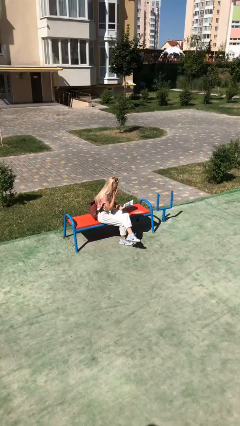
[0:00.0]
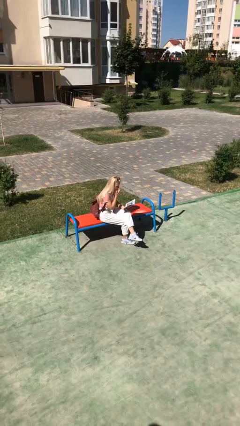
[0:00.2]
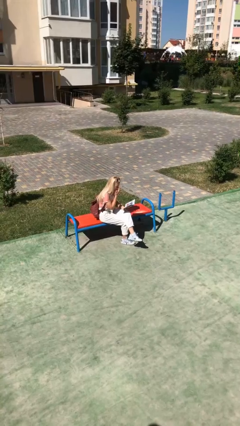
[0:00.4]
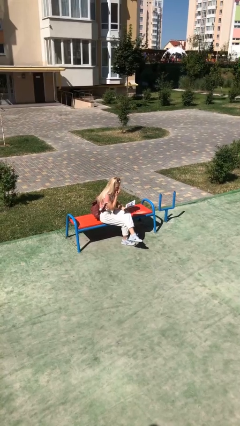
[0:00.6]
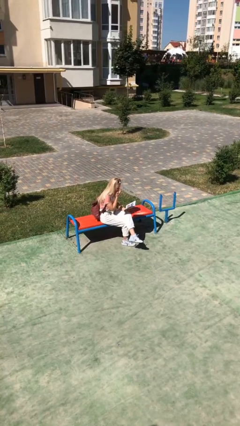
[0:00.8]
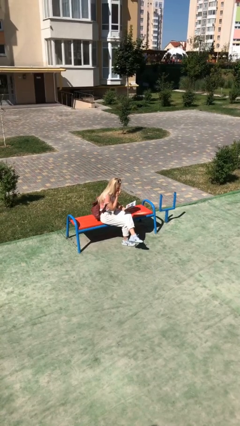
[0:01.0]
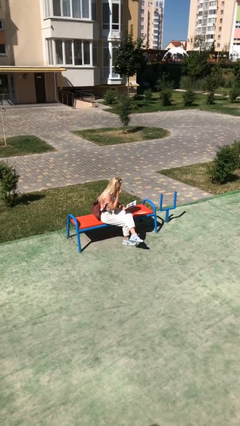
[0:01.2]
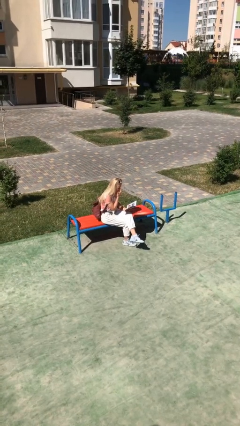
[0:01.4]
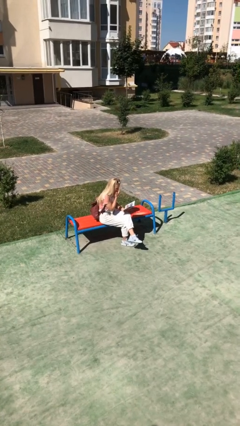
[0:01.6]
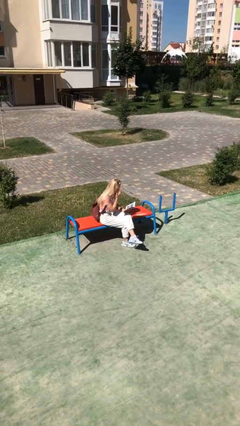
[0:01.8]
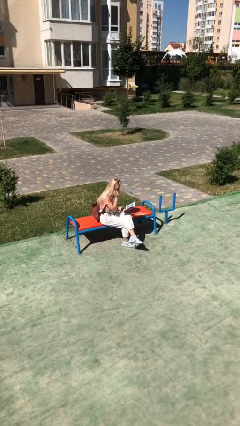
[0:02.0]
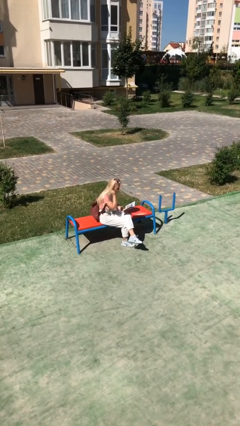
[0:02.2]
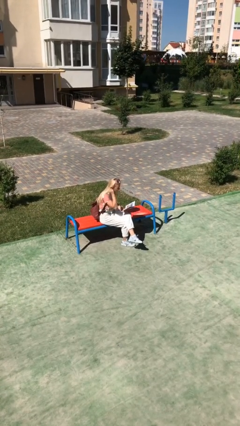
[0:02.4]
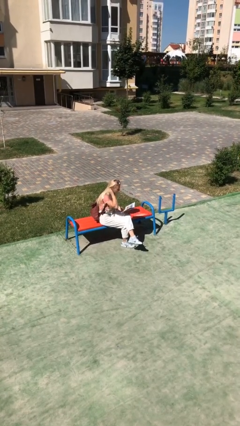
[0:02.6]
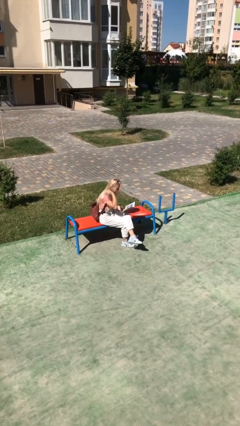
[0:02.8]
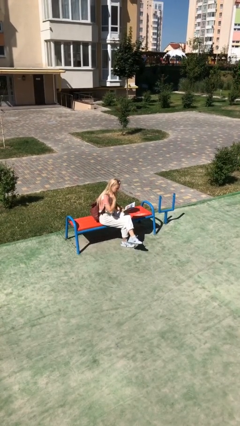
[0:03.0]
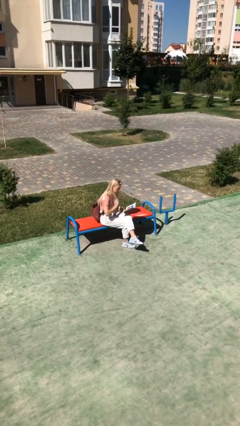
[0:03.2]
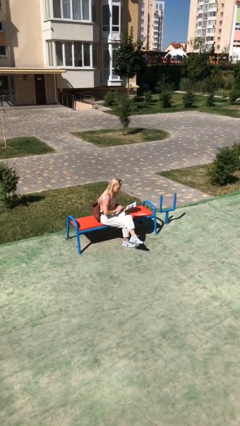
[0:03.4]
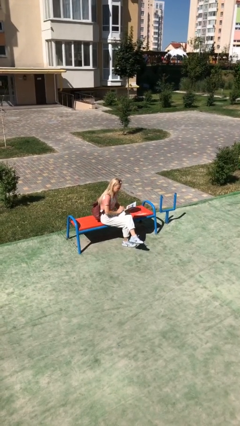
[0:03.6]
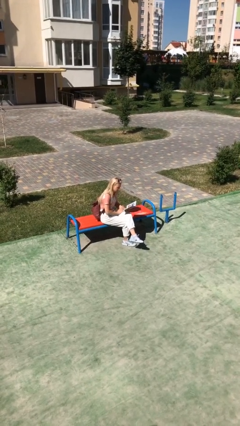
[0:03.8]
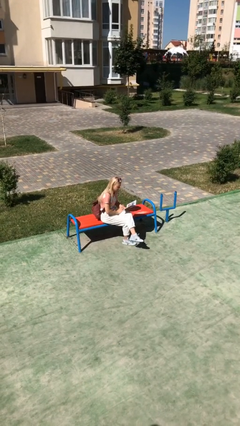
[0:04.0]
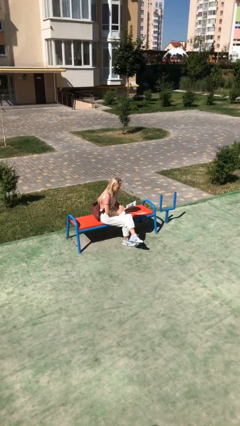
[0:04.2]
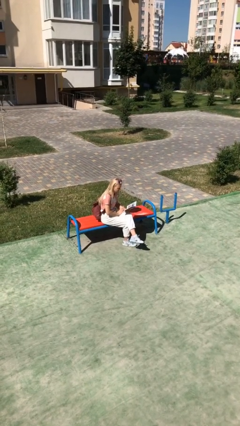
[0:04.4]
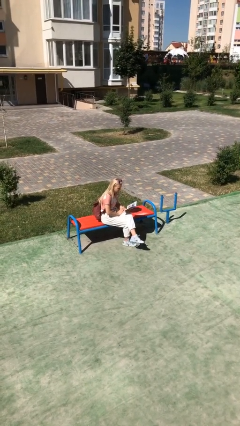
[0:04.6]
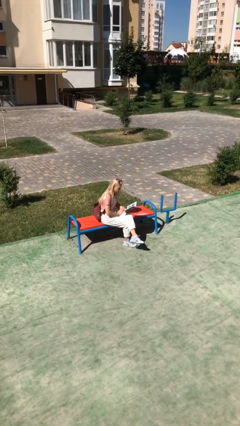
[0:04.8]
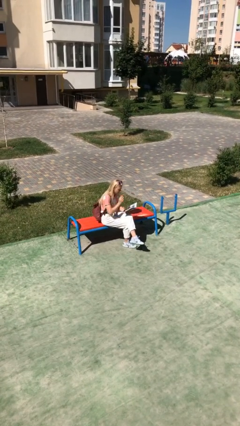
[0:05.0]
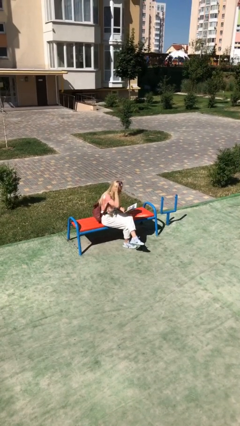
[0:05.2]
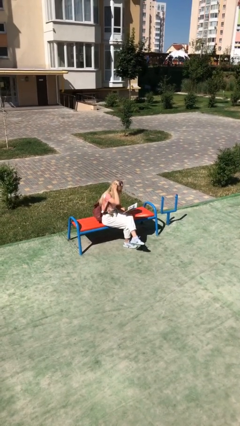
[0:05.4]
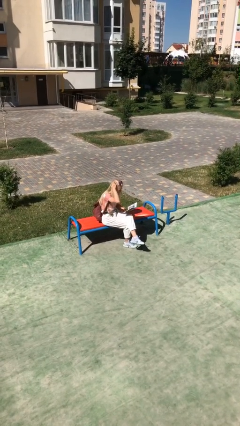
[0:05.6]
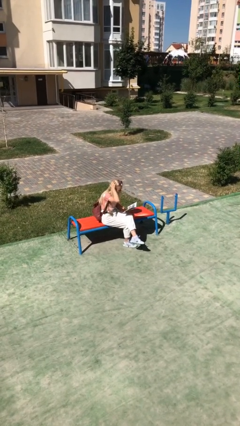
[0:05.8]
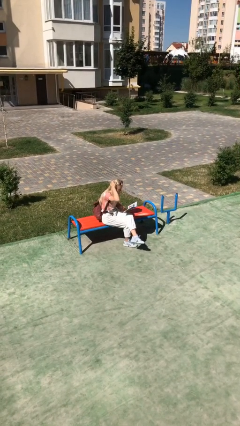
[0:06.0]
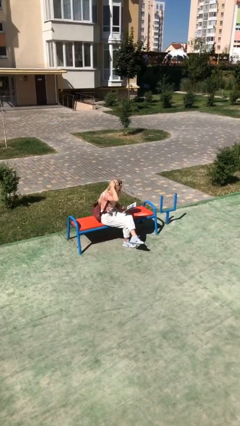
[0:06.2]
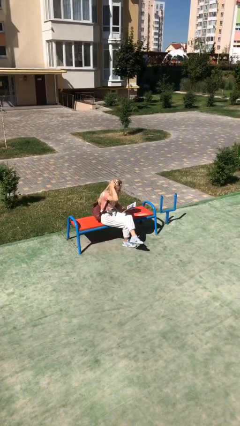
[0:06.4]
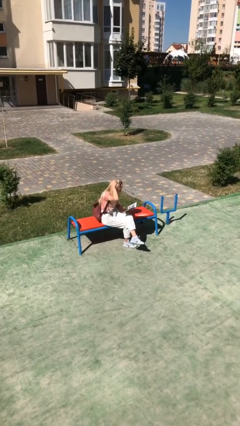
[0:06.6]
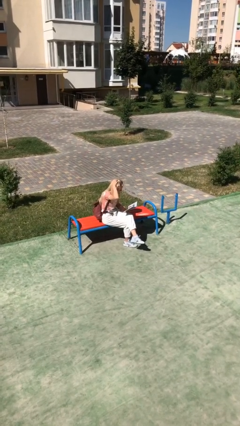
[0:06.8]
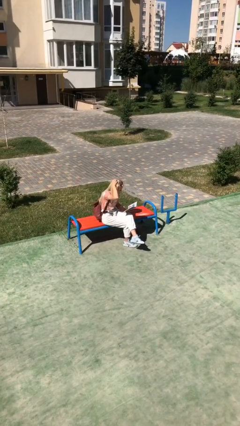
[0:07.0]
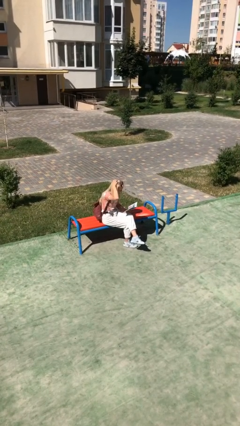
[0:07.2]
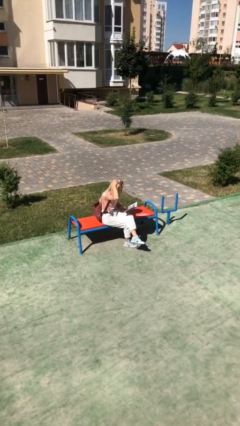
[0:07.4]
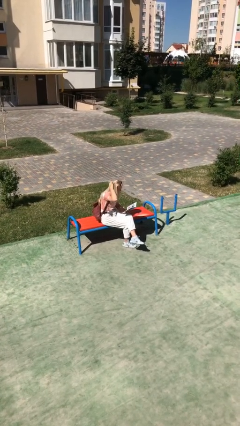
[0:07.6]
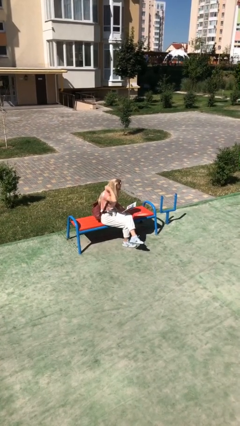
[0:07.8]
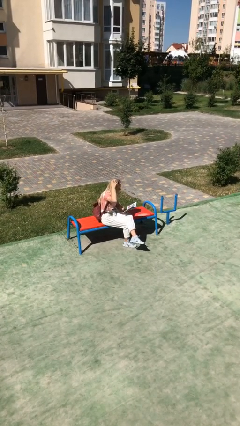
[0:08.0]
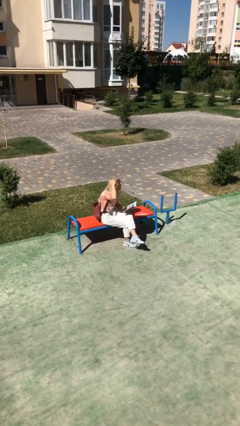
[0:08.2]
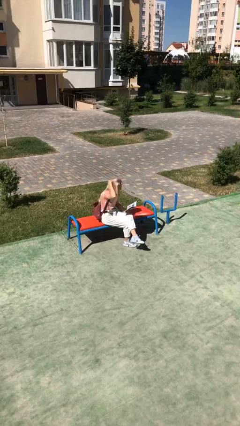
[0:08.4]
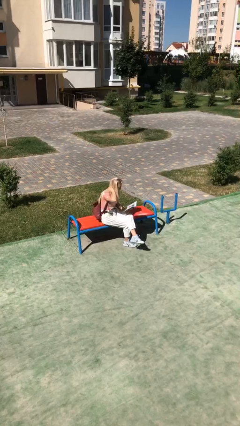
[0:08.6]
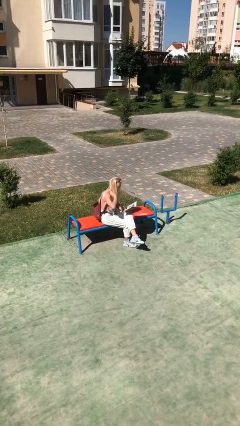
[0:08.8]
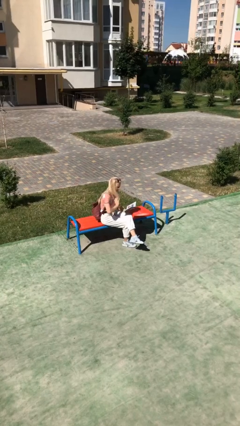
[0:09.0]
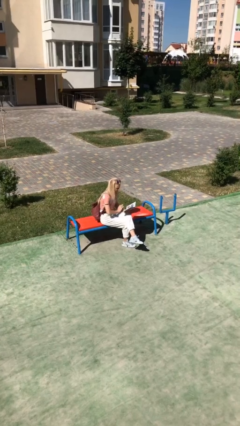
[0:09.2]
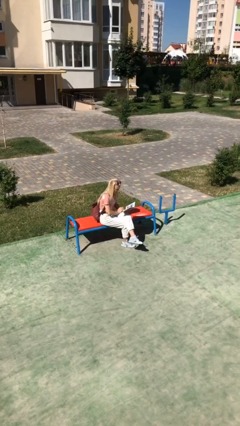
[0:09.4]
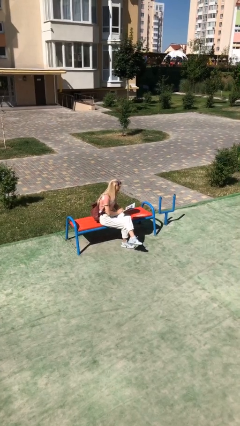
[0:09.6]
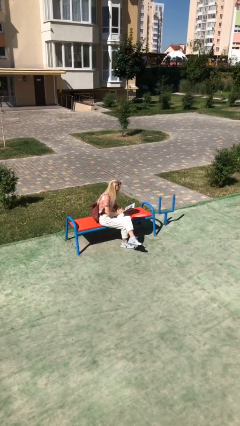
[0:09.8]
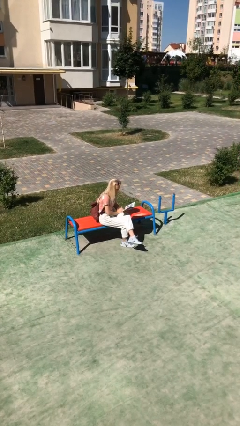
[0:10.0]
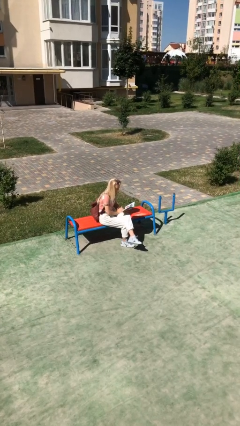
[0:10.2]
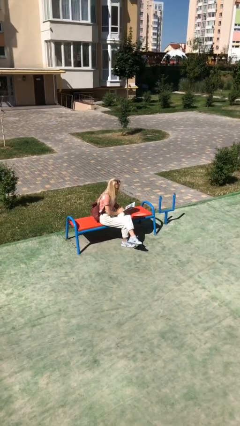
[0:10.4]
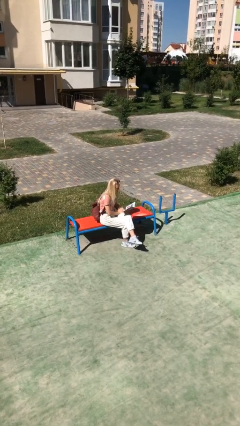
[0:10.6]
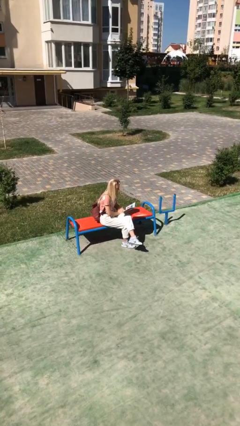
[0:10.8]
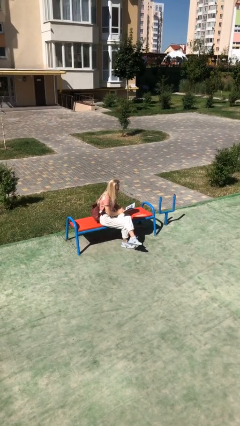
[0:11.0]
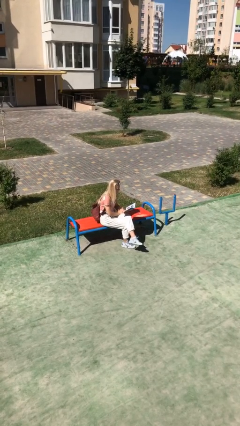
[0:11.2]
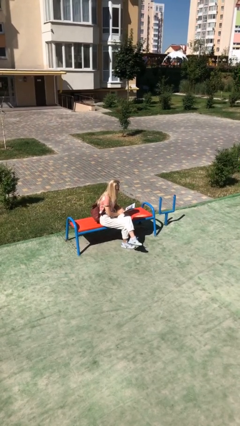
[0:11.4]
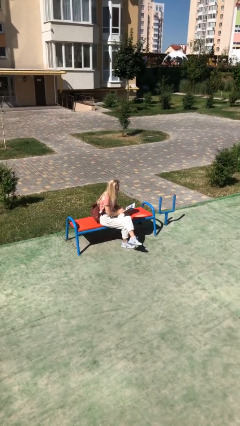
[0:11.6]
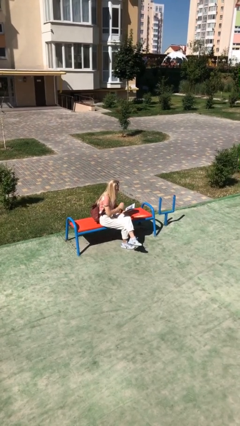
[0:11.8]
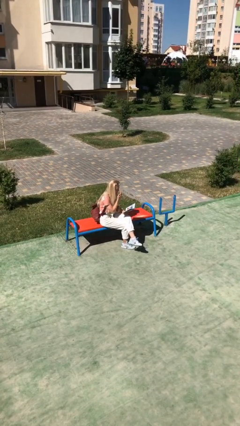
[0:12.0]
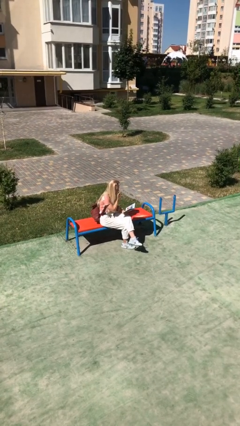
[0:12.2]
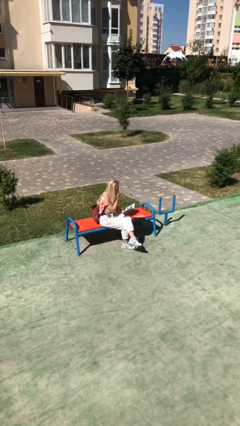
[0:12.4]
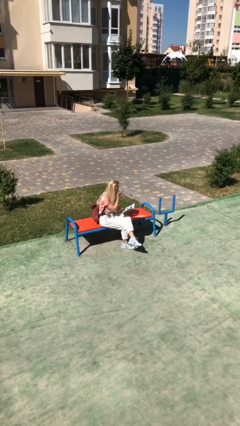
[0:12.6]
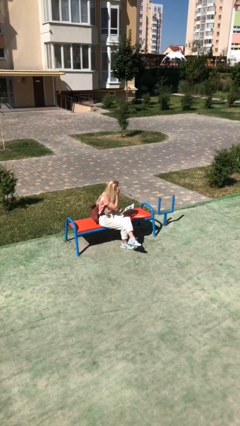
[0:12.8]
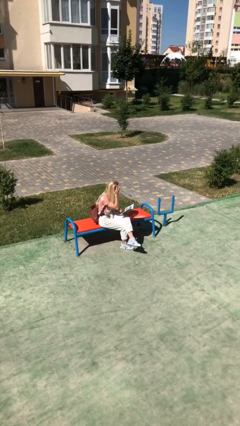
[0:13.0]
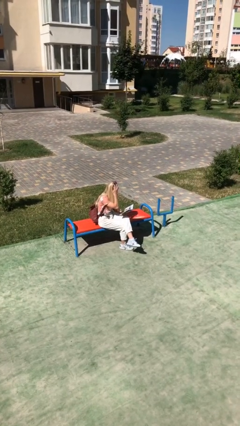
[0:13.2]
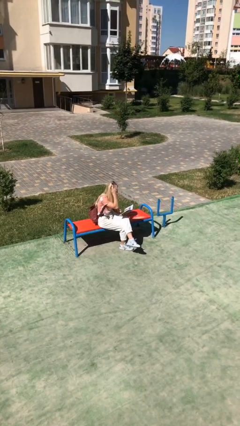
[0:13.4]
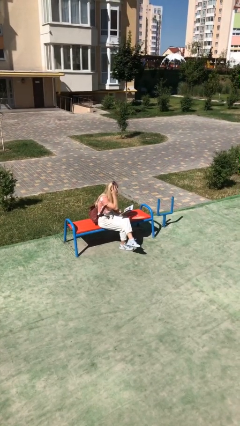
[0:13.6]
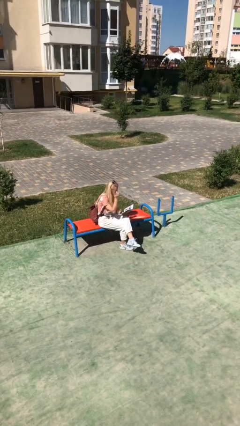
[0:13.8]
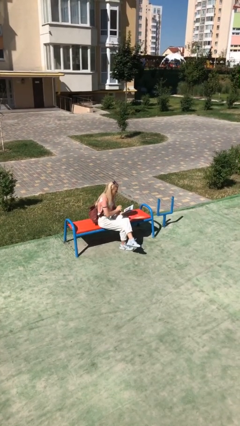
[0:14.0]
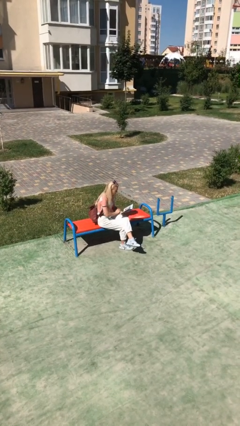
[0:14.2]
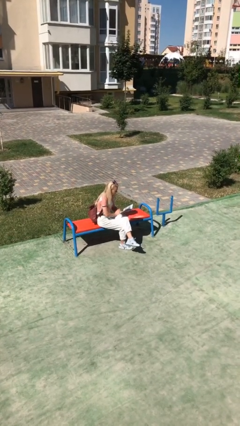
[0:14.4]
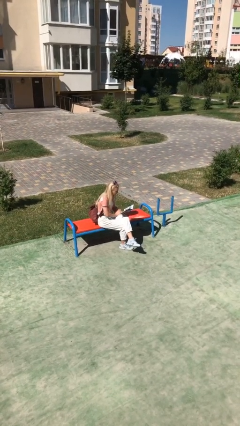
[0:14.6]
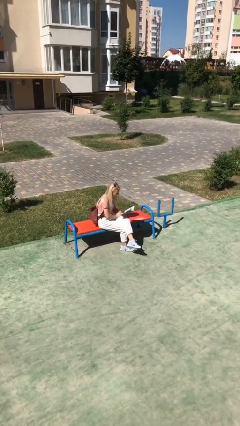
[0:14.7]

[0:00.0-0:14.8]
person reads document

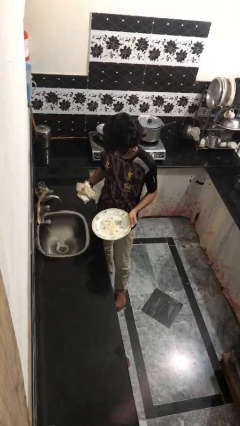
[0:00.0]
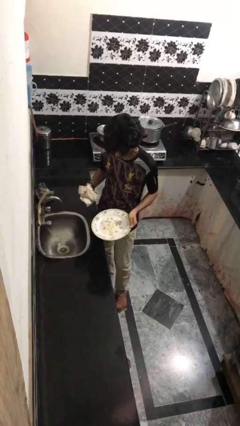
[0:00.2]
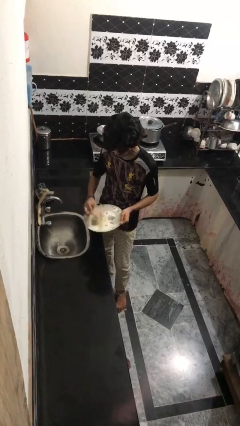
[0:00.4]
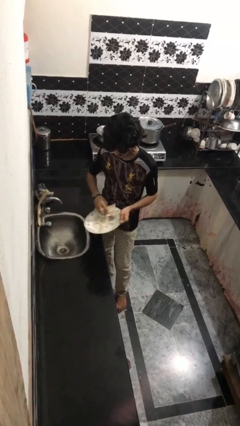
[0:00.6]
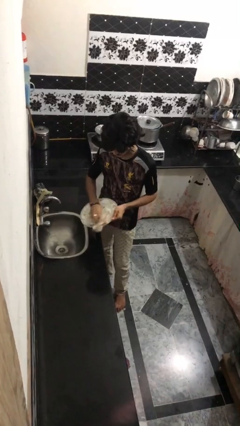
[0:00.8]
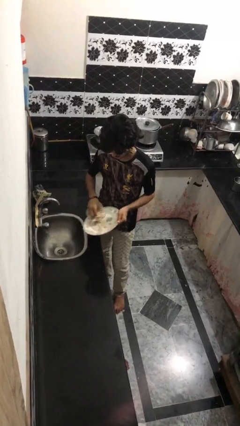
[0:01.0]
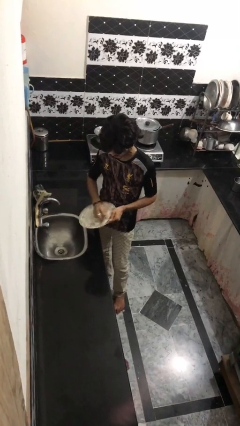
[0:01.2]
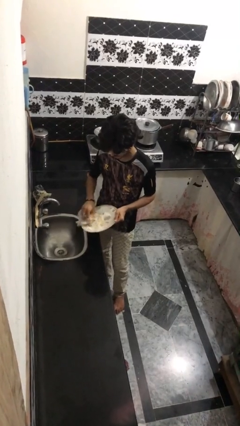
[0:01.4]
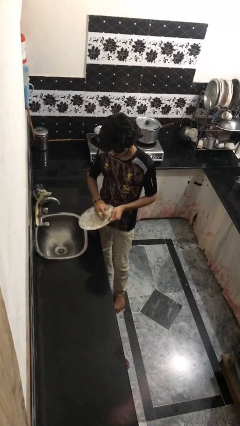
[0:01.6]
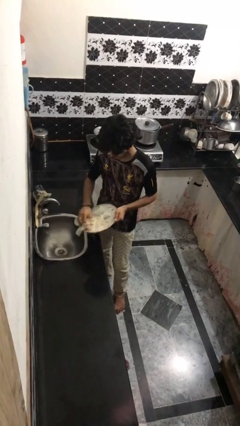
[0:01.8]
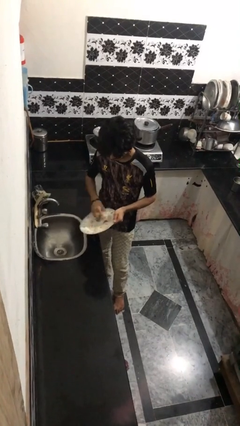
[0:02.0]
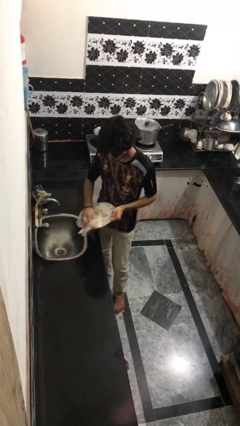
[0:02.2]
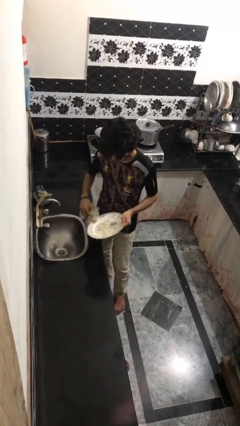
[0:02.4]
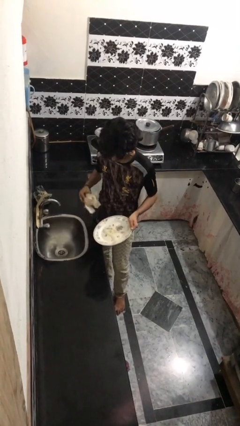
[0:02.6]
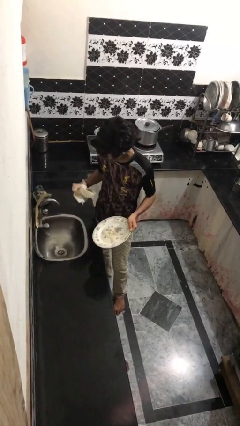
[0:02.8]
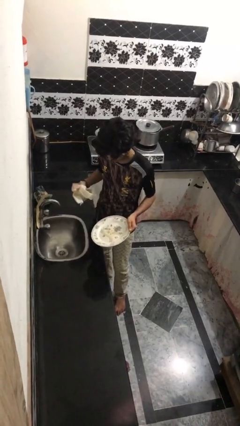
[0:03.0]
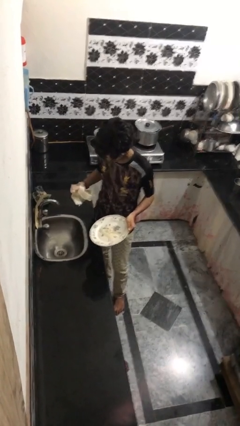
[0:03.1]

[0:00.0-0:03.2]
person dries dish
